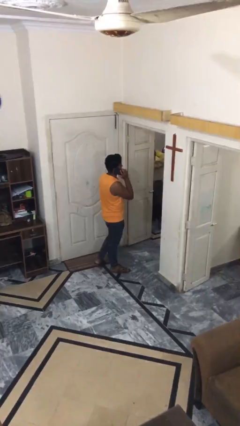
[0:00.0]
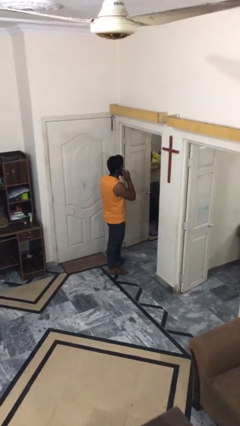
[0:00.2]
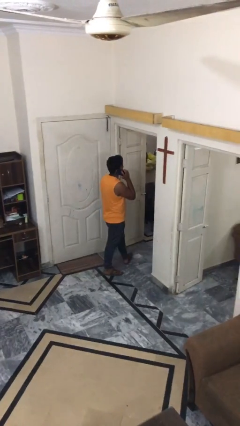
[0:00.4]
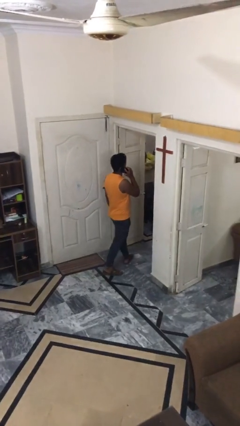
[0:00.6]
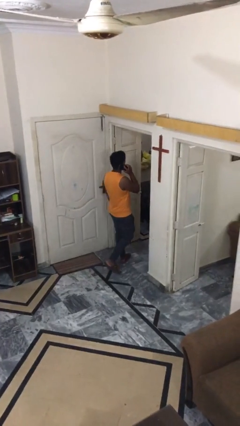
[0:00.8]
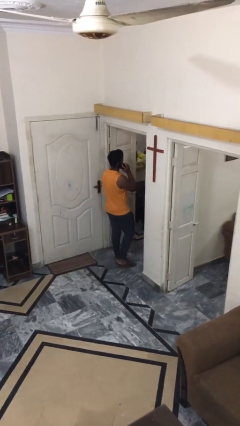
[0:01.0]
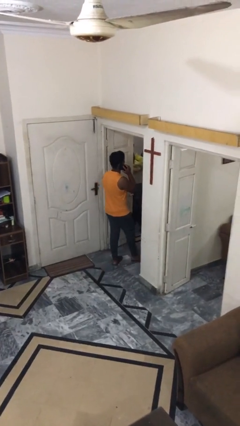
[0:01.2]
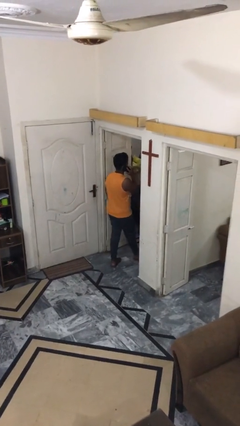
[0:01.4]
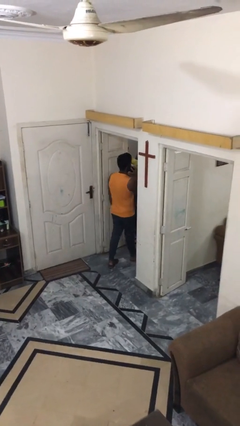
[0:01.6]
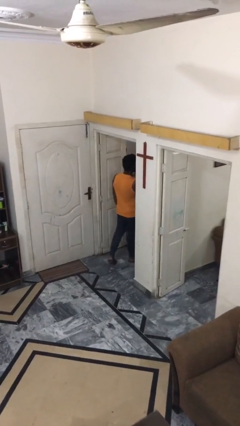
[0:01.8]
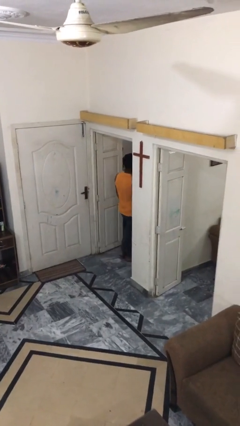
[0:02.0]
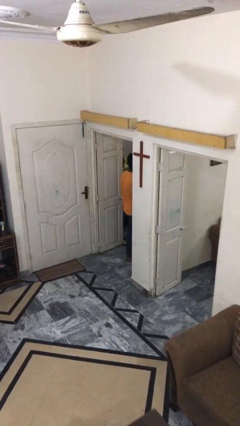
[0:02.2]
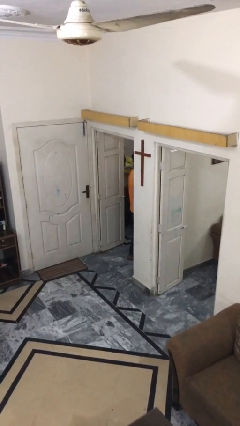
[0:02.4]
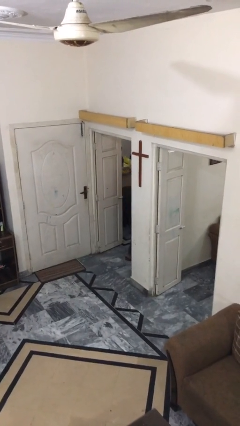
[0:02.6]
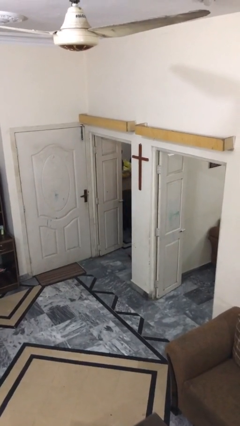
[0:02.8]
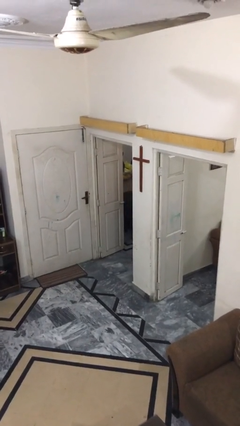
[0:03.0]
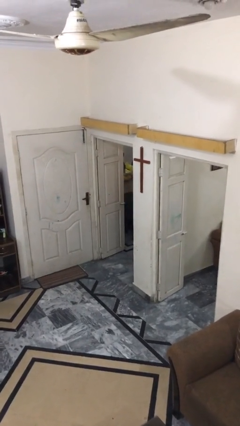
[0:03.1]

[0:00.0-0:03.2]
person exits scene through structure

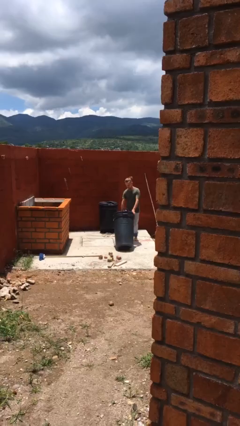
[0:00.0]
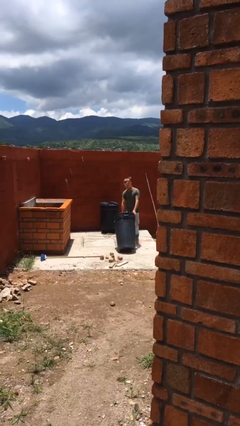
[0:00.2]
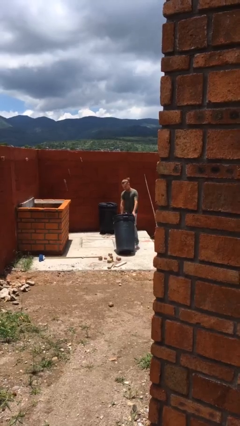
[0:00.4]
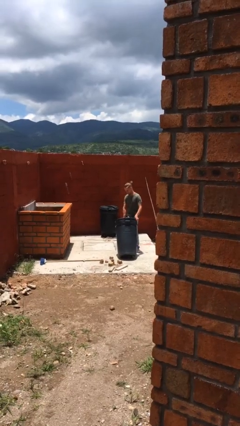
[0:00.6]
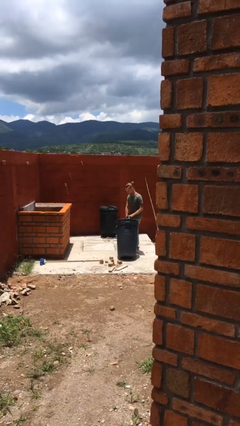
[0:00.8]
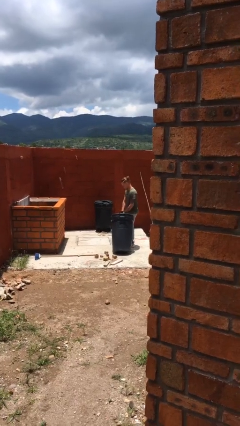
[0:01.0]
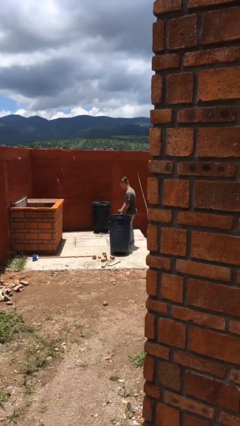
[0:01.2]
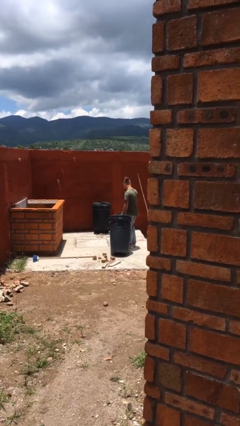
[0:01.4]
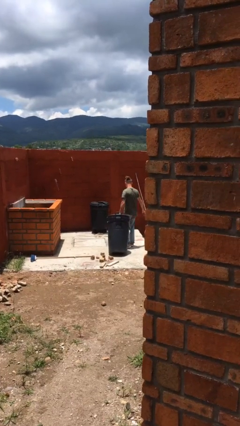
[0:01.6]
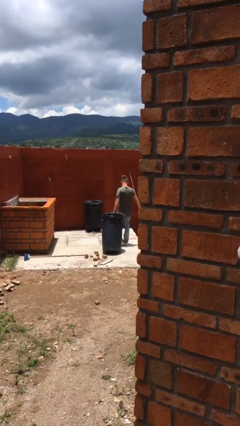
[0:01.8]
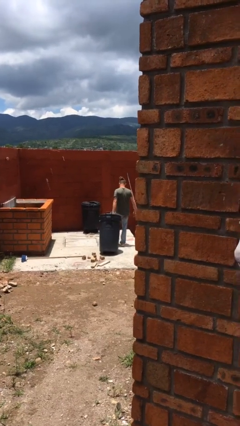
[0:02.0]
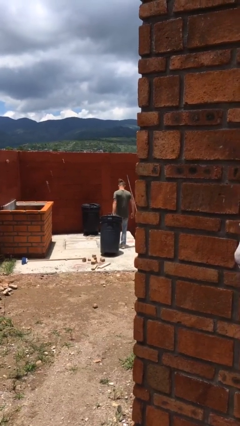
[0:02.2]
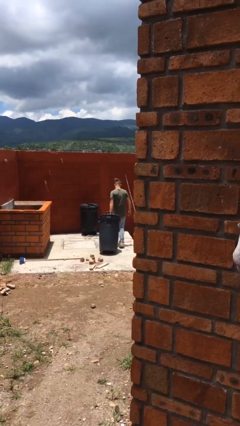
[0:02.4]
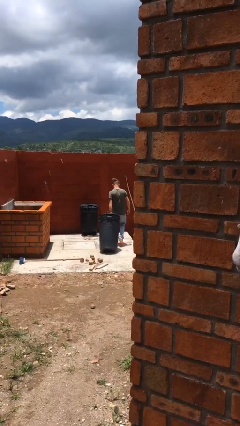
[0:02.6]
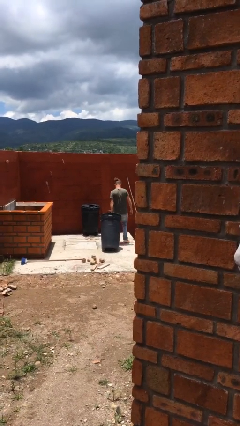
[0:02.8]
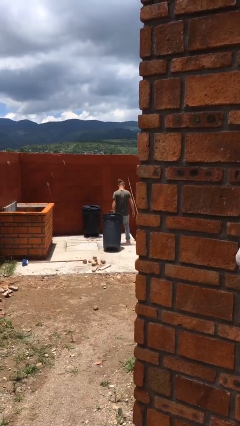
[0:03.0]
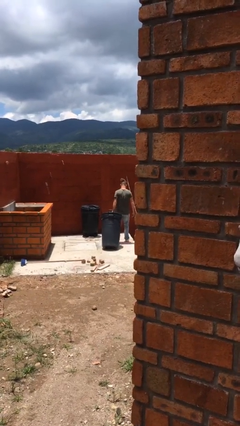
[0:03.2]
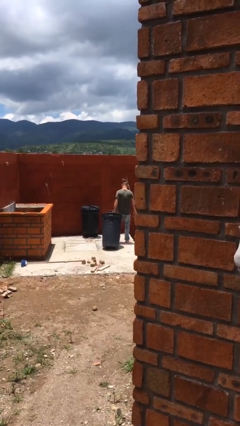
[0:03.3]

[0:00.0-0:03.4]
person pulls wheeled trashcan

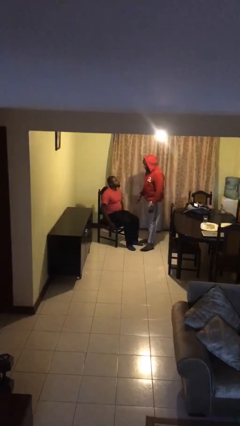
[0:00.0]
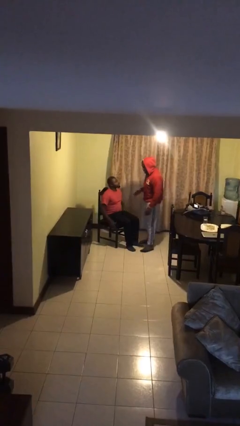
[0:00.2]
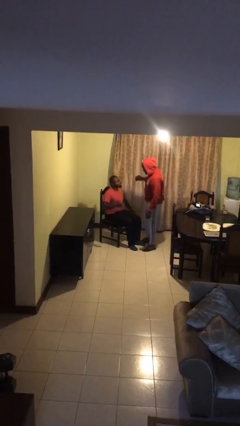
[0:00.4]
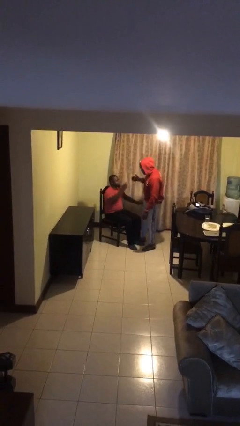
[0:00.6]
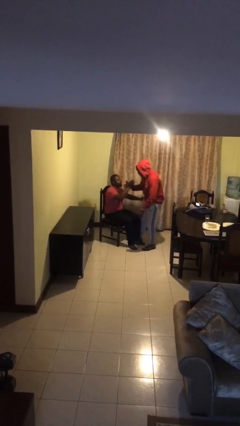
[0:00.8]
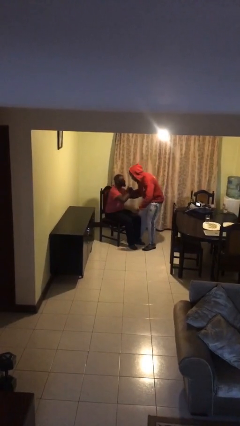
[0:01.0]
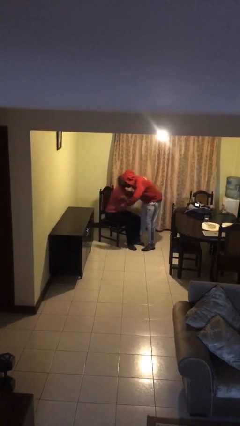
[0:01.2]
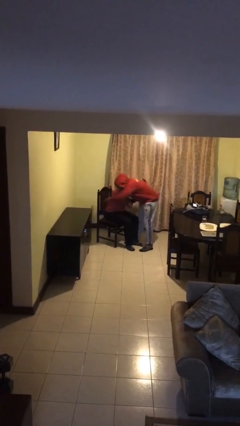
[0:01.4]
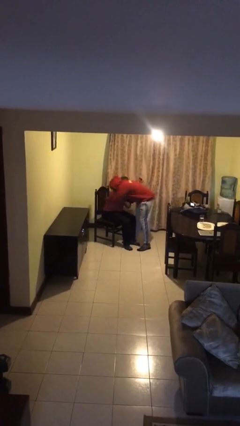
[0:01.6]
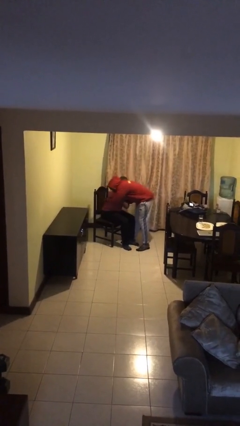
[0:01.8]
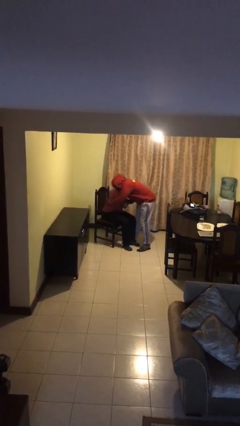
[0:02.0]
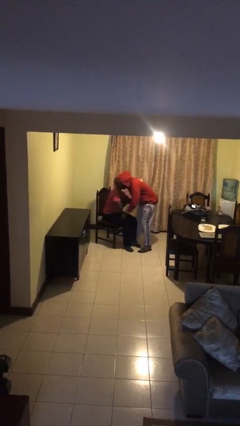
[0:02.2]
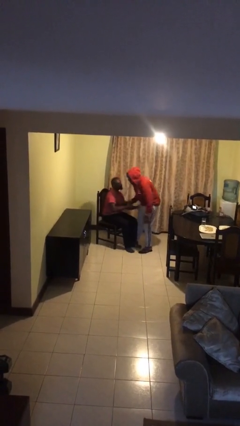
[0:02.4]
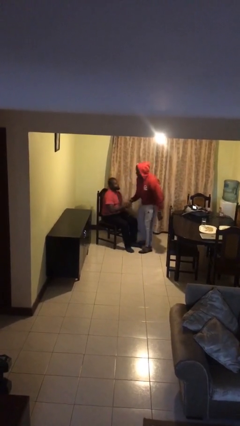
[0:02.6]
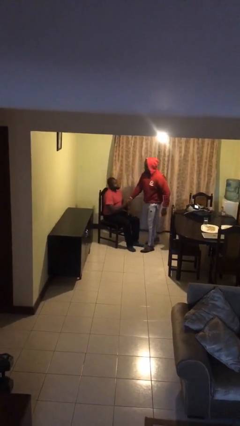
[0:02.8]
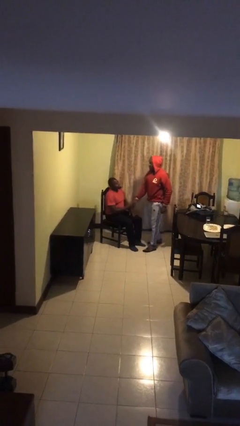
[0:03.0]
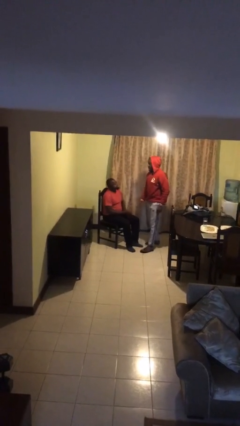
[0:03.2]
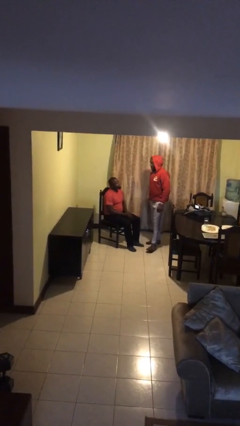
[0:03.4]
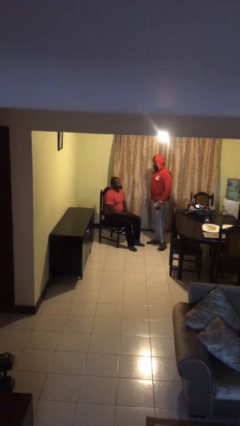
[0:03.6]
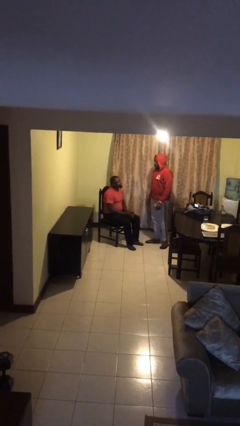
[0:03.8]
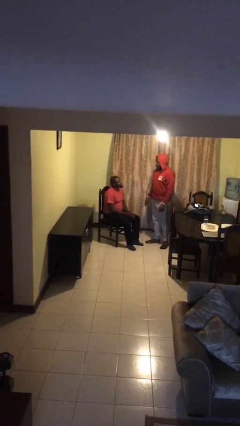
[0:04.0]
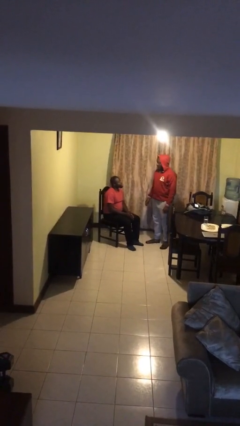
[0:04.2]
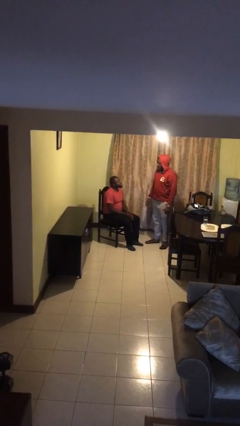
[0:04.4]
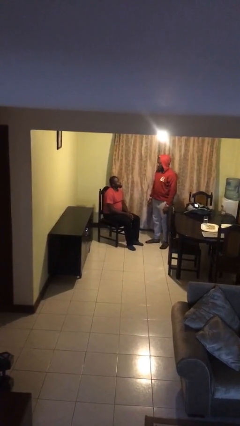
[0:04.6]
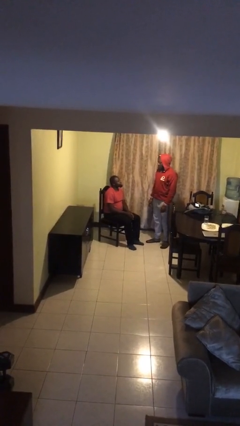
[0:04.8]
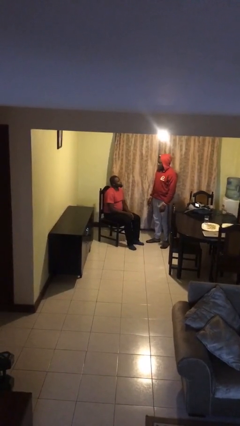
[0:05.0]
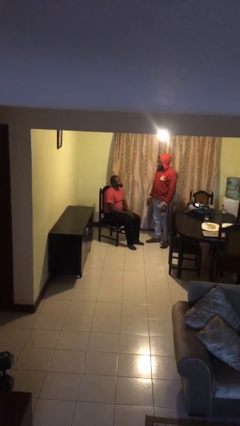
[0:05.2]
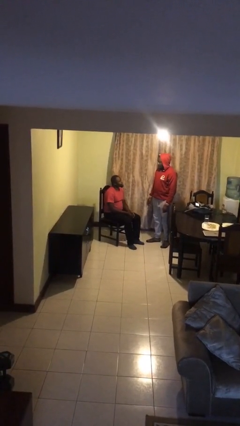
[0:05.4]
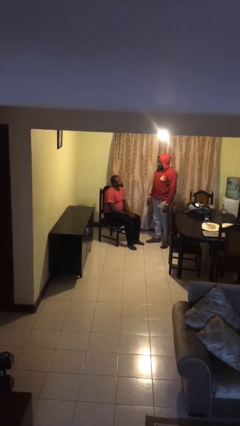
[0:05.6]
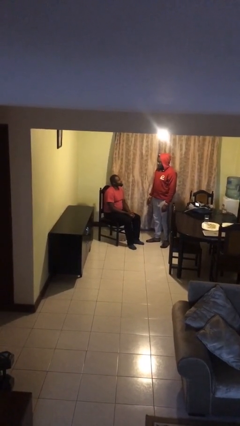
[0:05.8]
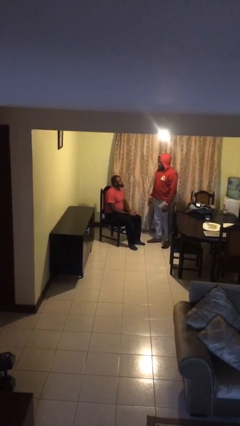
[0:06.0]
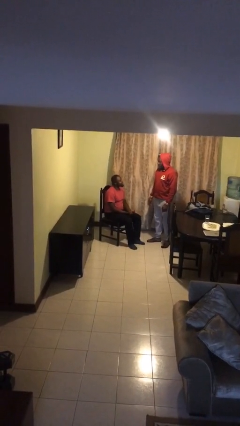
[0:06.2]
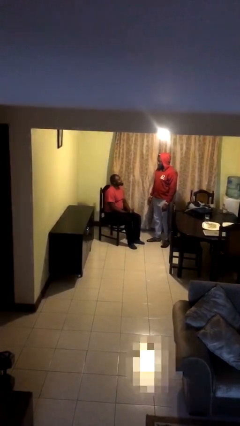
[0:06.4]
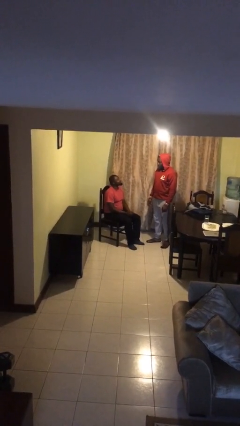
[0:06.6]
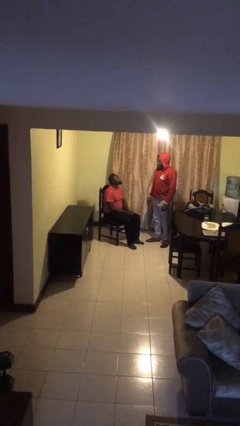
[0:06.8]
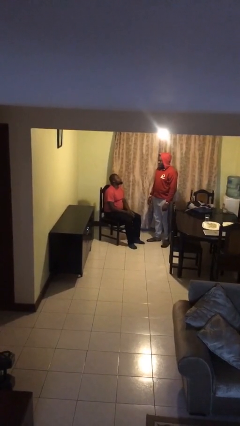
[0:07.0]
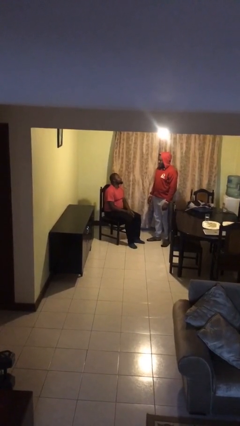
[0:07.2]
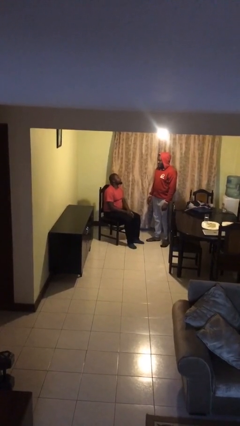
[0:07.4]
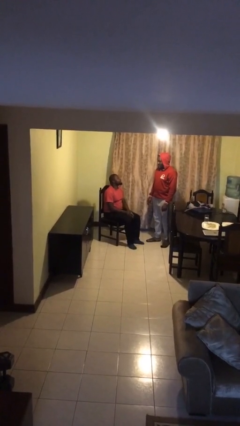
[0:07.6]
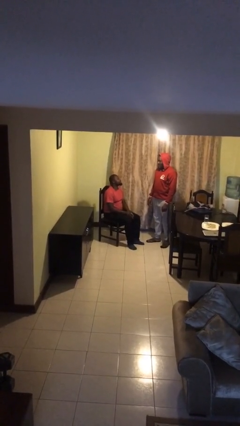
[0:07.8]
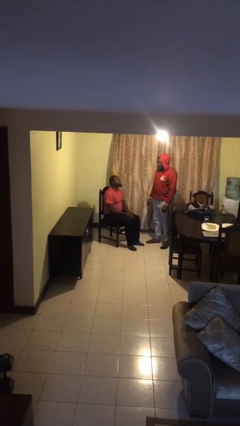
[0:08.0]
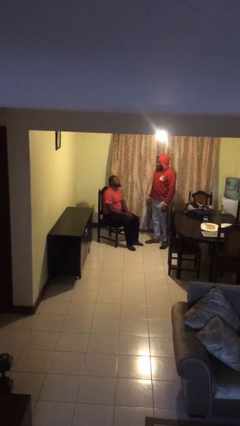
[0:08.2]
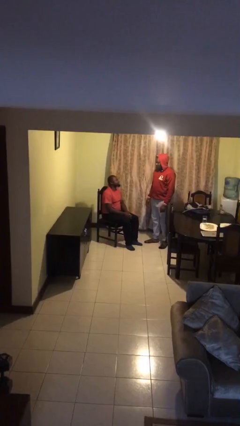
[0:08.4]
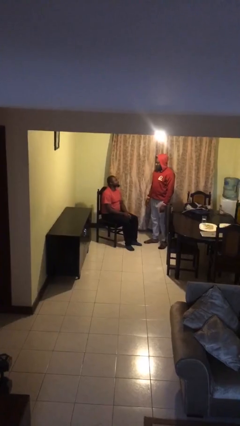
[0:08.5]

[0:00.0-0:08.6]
person embraces person

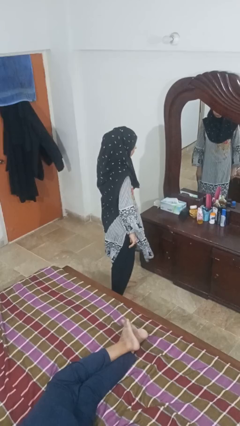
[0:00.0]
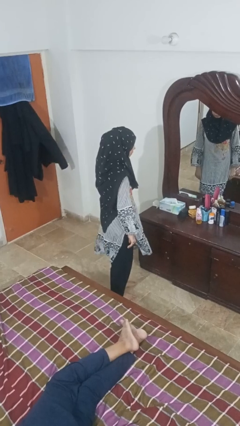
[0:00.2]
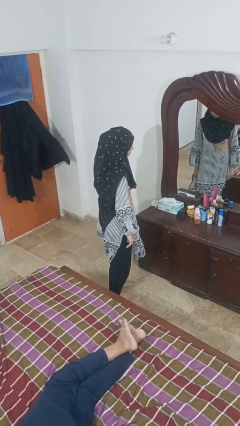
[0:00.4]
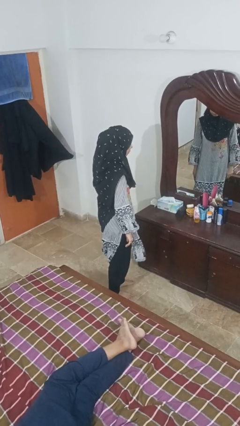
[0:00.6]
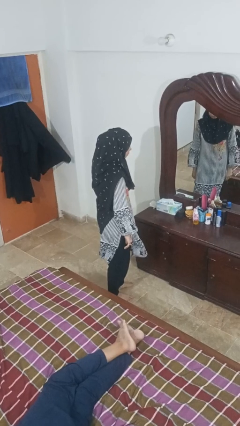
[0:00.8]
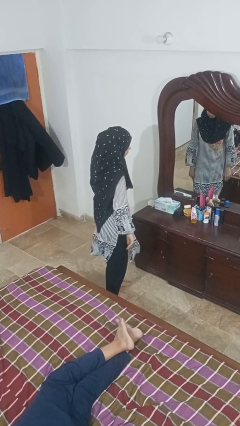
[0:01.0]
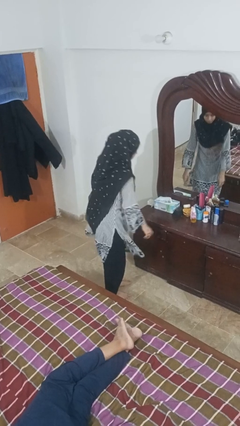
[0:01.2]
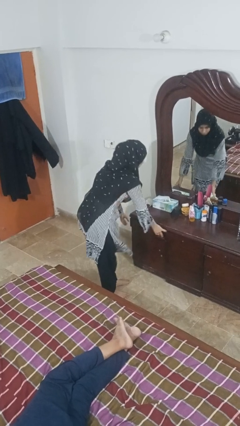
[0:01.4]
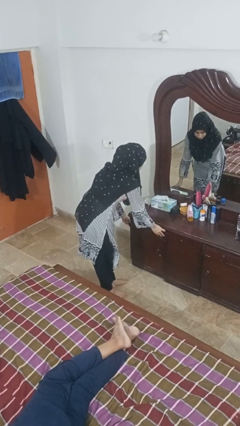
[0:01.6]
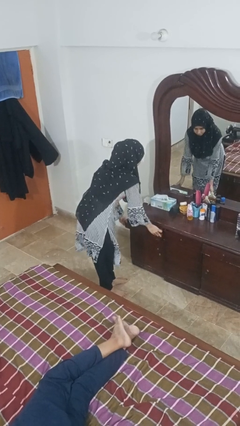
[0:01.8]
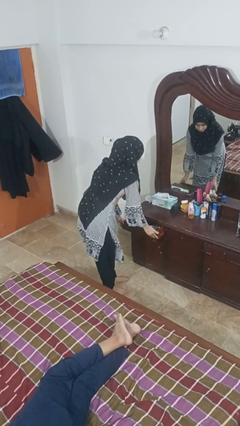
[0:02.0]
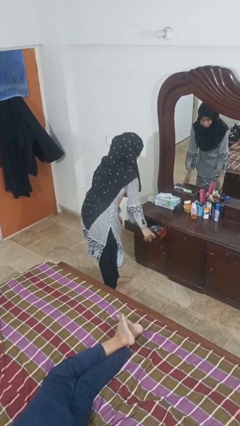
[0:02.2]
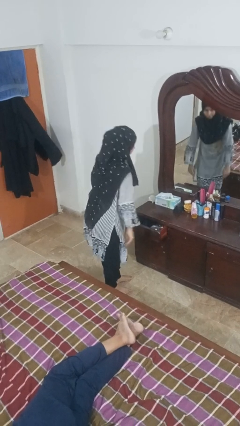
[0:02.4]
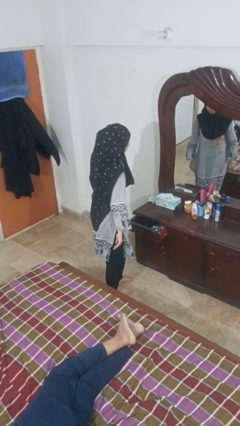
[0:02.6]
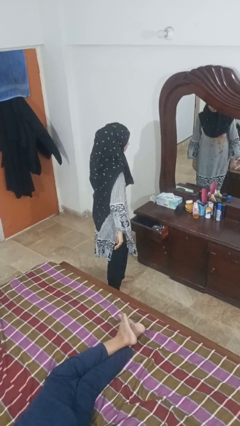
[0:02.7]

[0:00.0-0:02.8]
person opens dresser drawer
